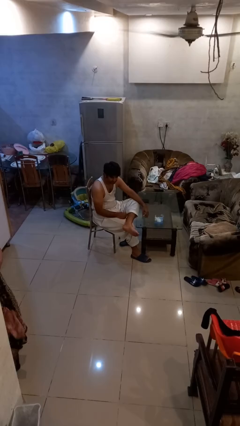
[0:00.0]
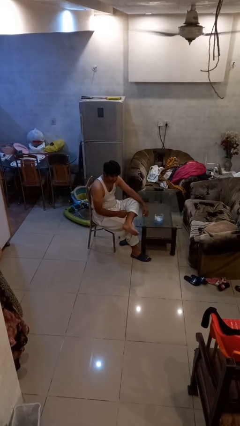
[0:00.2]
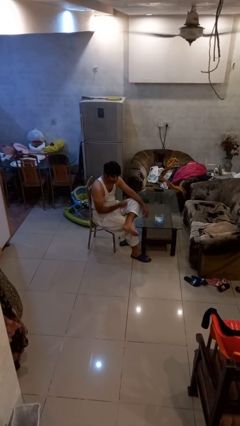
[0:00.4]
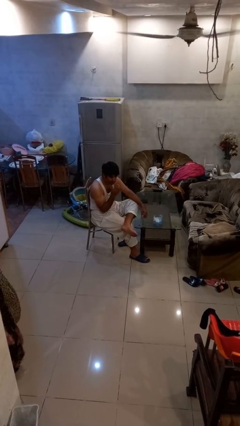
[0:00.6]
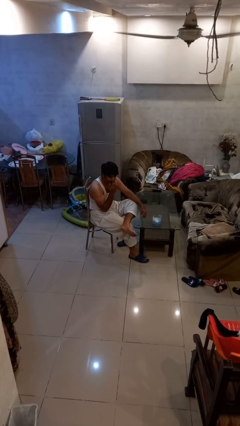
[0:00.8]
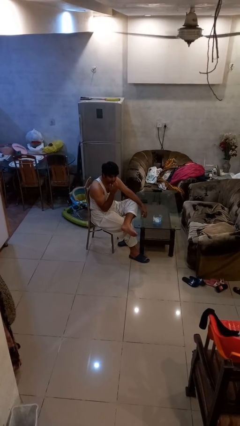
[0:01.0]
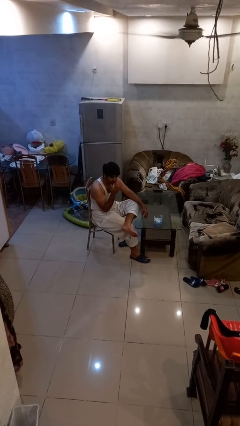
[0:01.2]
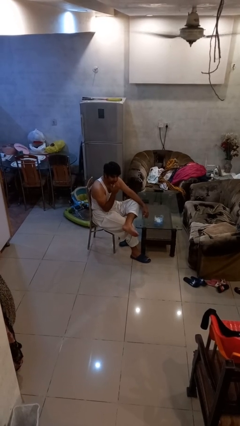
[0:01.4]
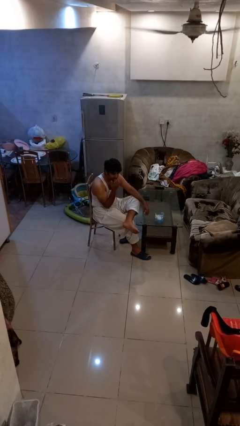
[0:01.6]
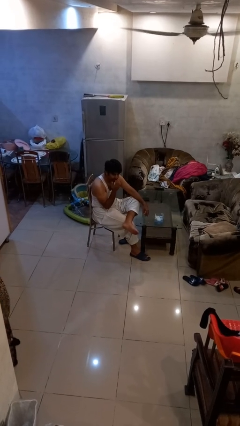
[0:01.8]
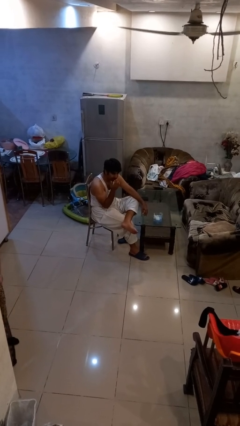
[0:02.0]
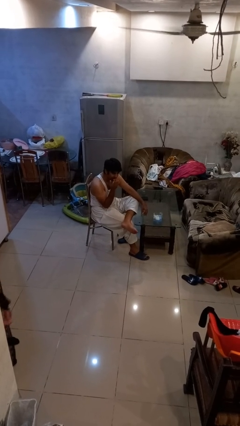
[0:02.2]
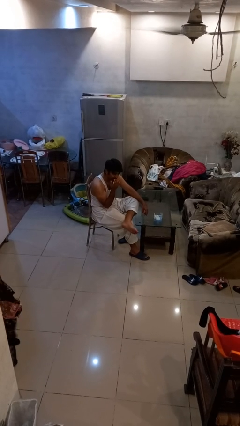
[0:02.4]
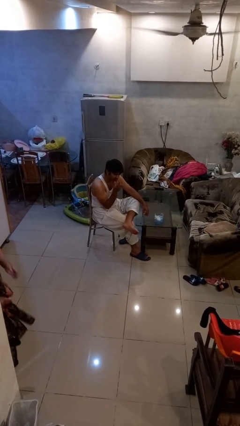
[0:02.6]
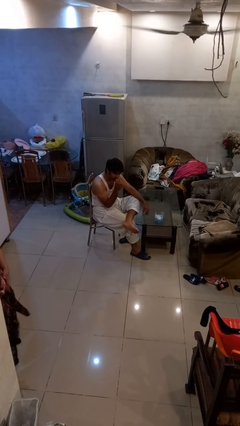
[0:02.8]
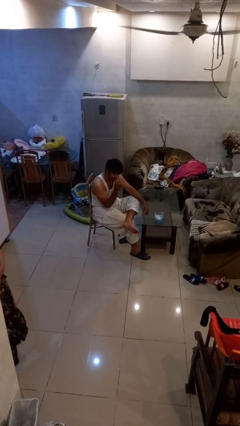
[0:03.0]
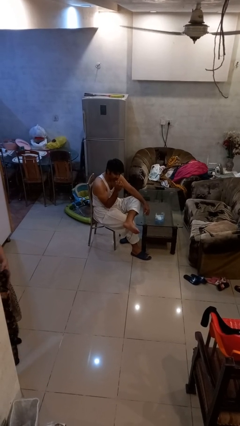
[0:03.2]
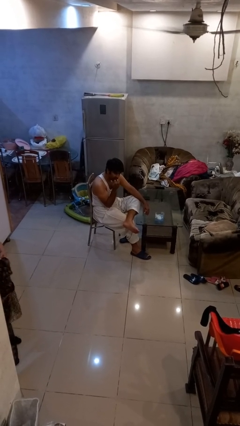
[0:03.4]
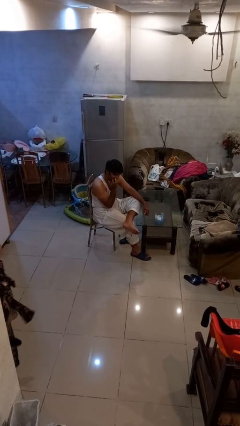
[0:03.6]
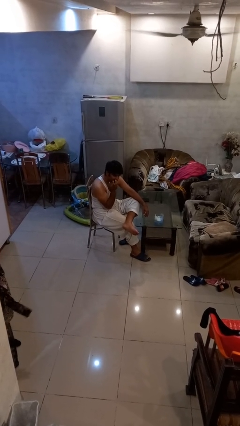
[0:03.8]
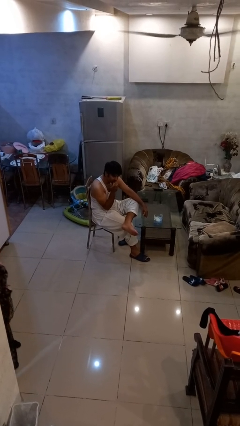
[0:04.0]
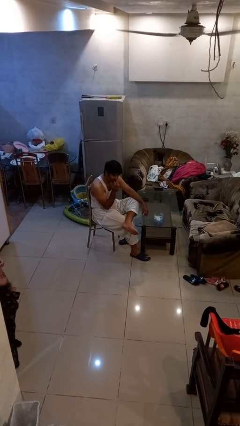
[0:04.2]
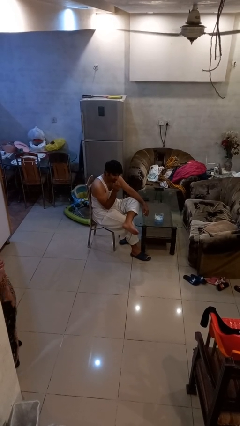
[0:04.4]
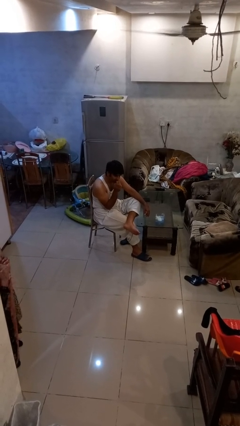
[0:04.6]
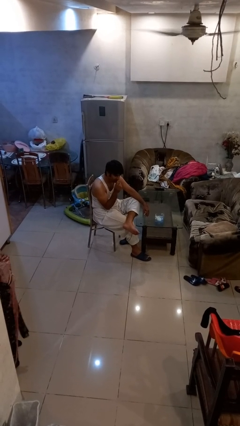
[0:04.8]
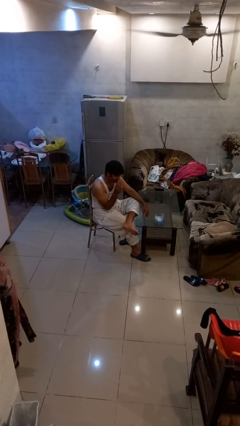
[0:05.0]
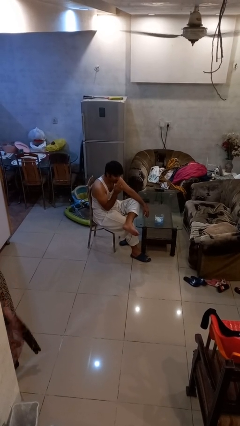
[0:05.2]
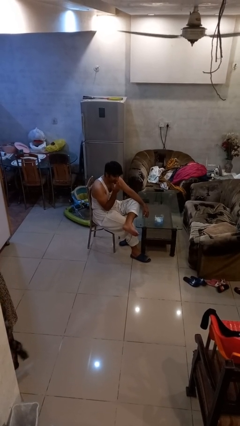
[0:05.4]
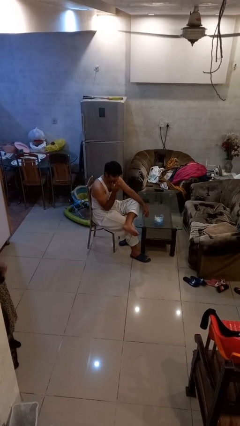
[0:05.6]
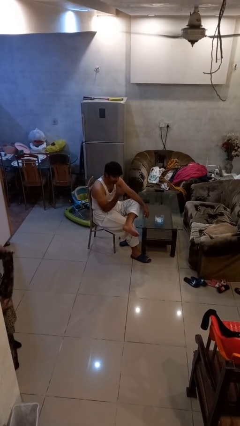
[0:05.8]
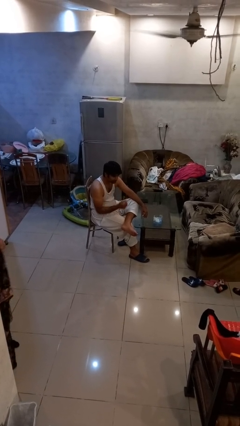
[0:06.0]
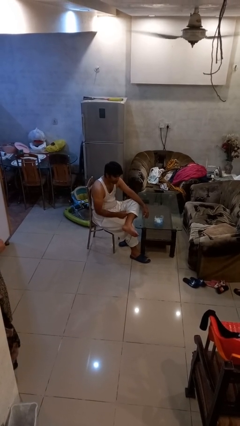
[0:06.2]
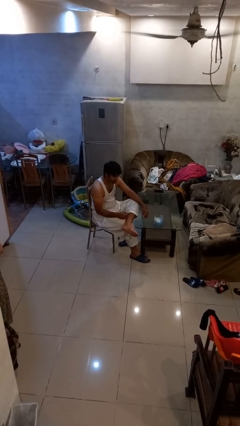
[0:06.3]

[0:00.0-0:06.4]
person licks fingers

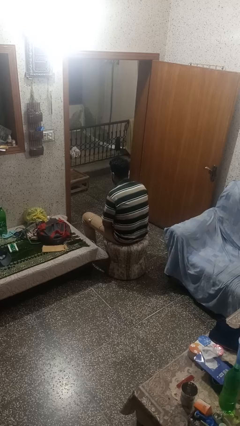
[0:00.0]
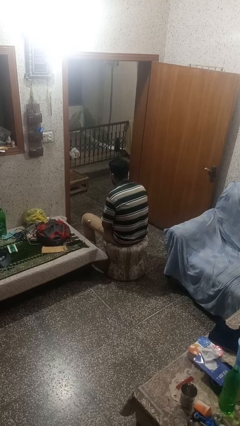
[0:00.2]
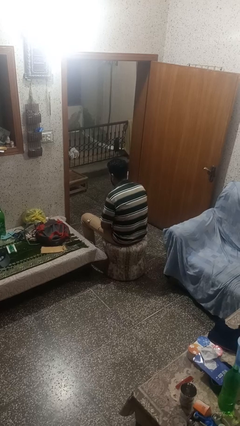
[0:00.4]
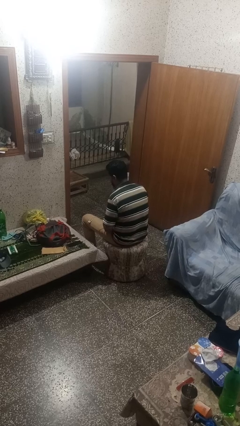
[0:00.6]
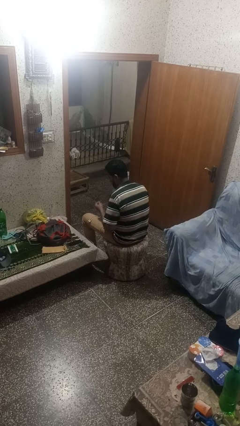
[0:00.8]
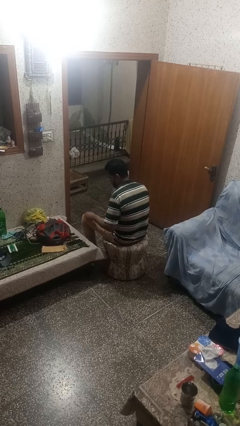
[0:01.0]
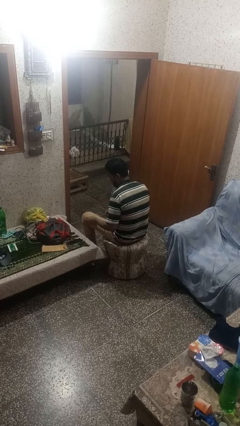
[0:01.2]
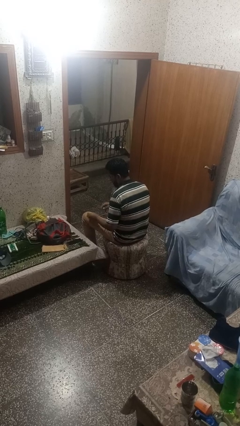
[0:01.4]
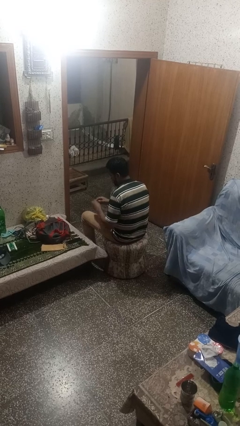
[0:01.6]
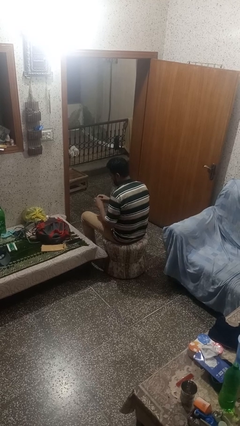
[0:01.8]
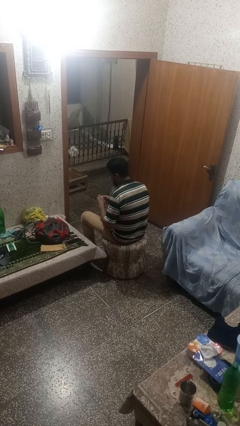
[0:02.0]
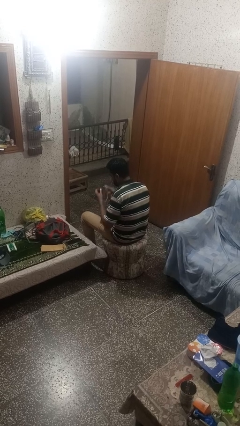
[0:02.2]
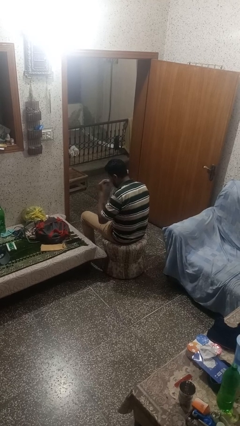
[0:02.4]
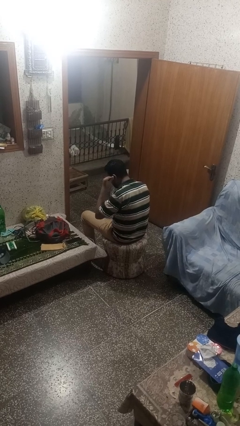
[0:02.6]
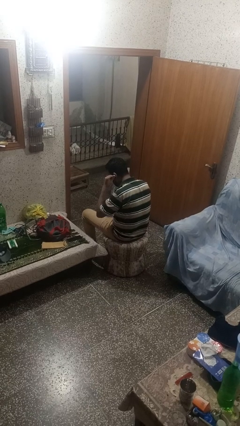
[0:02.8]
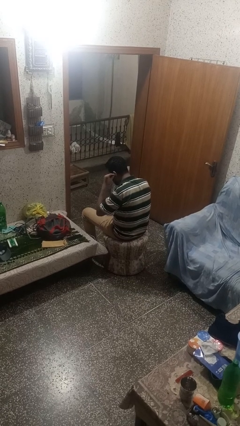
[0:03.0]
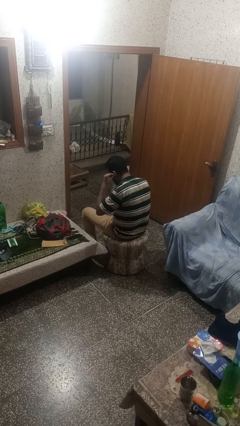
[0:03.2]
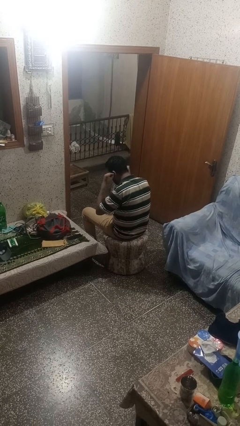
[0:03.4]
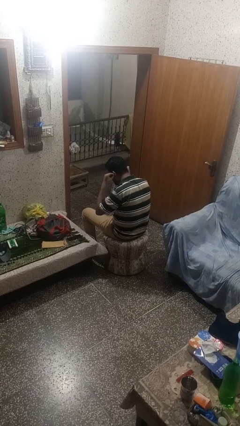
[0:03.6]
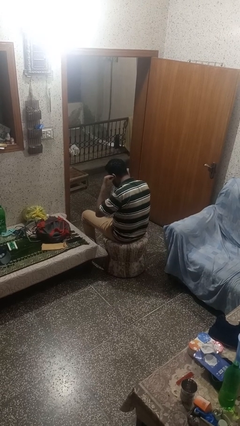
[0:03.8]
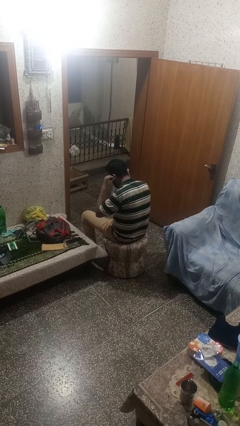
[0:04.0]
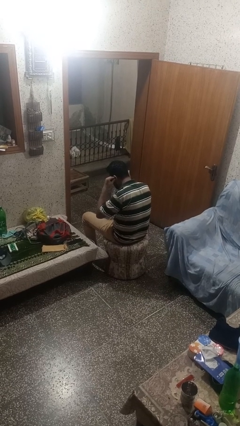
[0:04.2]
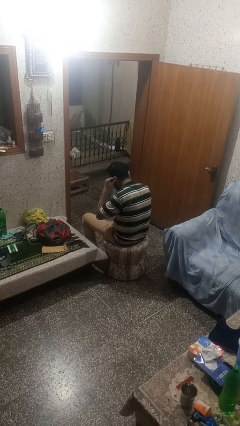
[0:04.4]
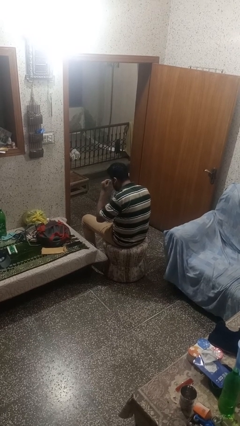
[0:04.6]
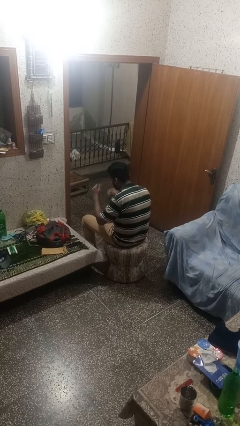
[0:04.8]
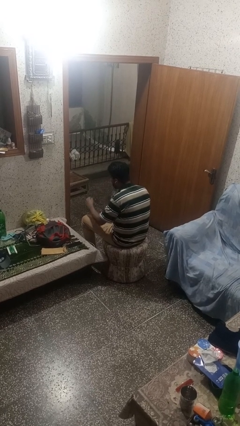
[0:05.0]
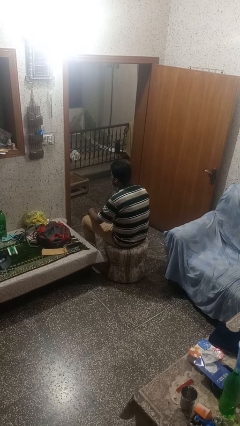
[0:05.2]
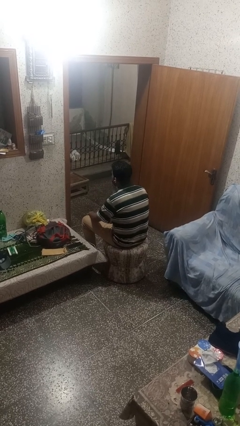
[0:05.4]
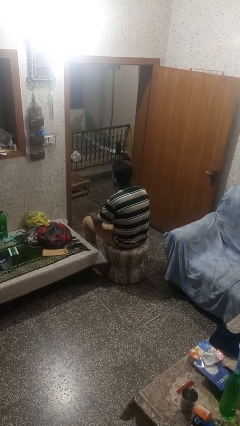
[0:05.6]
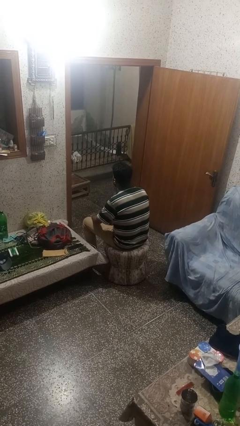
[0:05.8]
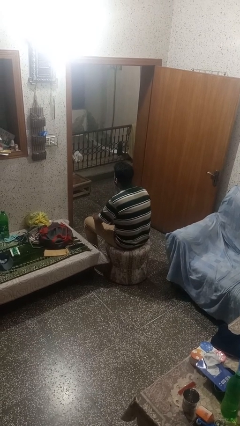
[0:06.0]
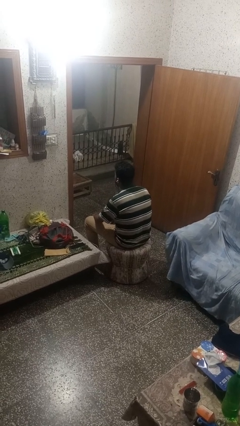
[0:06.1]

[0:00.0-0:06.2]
person puts on headphones

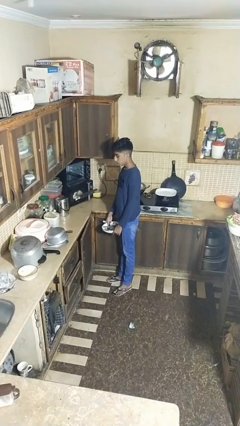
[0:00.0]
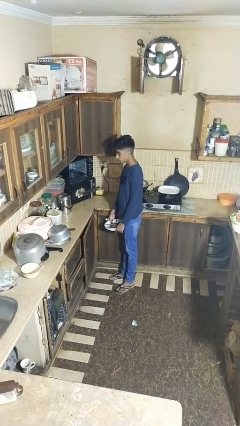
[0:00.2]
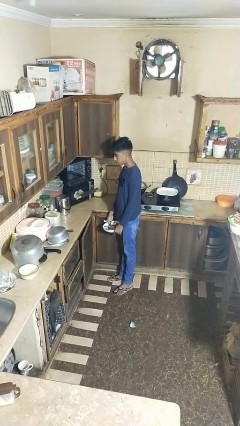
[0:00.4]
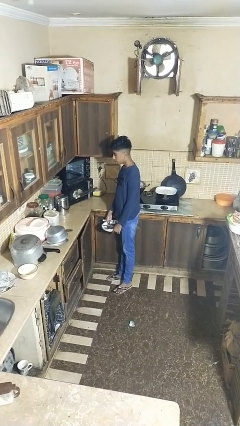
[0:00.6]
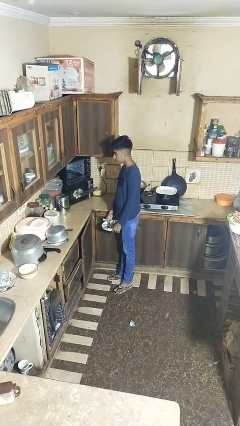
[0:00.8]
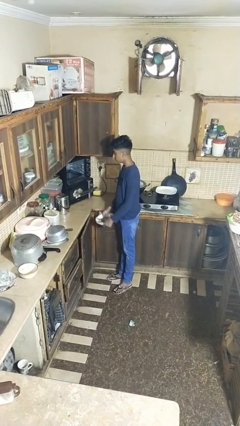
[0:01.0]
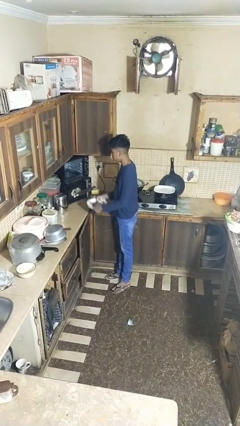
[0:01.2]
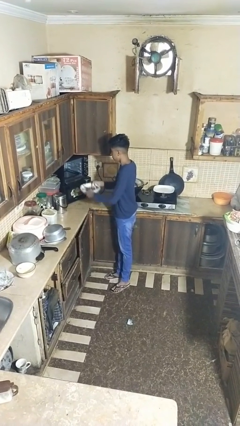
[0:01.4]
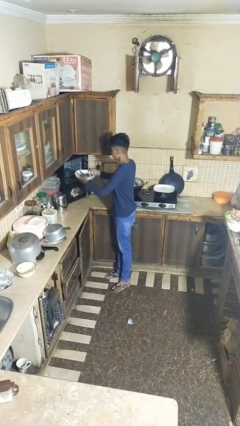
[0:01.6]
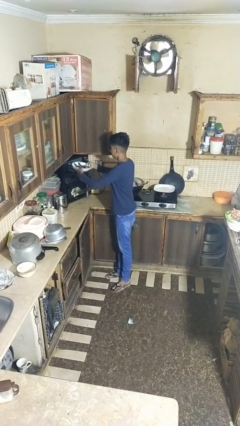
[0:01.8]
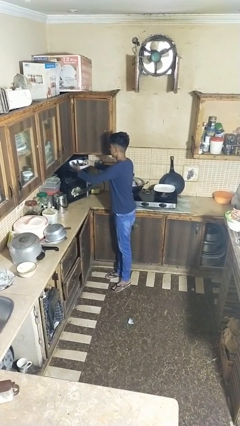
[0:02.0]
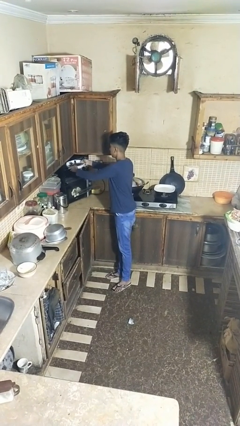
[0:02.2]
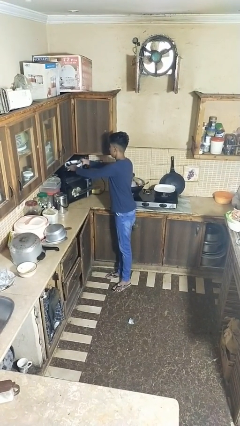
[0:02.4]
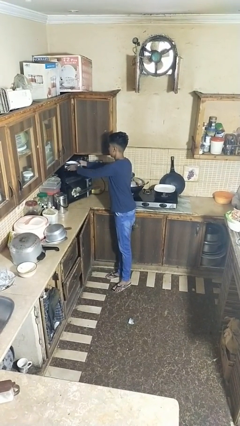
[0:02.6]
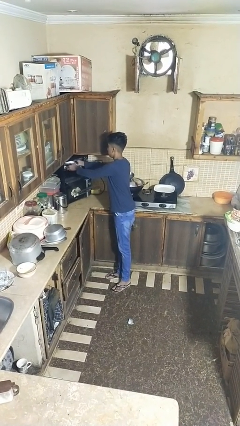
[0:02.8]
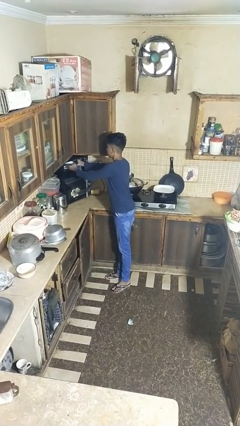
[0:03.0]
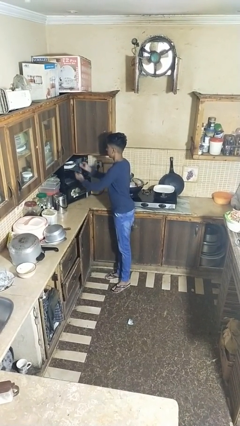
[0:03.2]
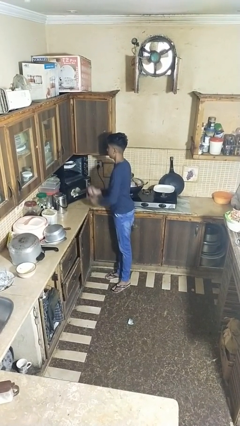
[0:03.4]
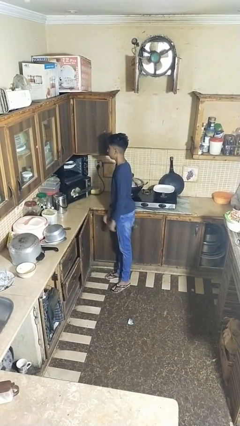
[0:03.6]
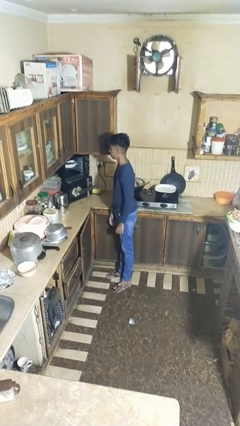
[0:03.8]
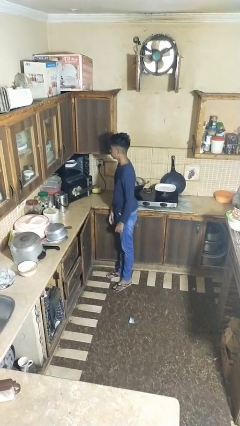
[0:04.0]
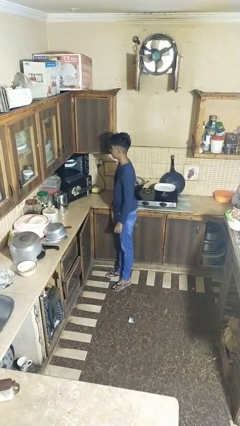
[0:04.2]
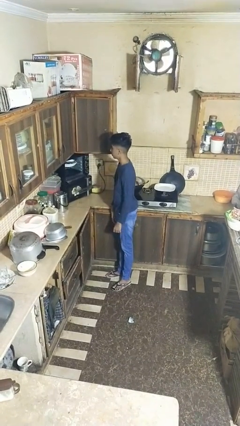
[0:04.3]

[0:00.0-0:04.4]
person loads dishwasher

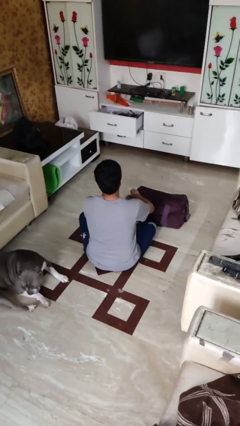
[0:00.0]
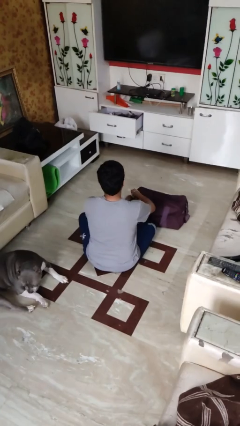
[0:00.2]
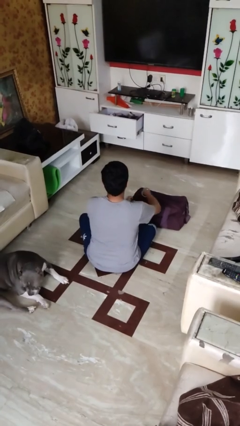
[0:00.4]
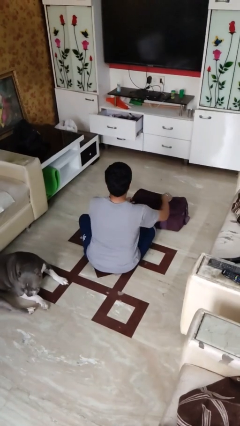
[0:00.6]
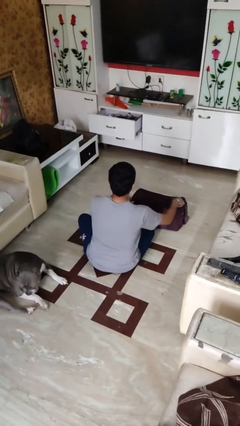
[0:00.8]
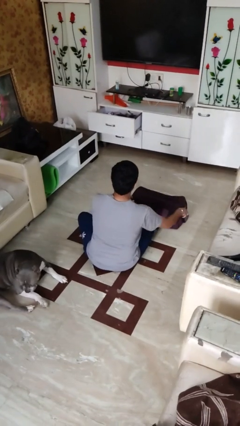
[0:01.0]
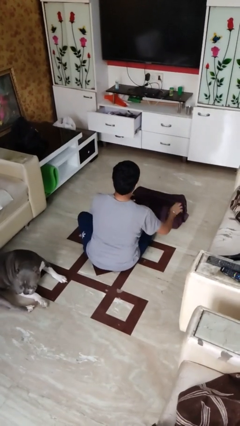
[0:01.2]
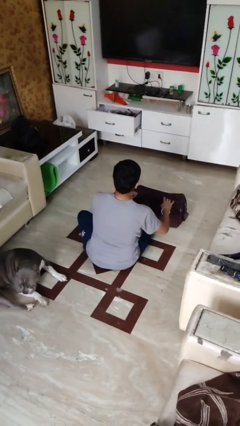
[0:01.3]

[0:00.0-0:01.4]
person opens suitcase
